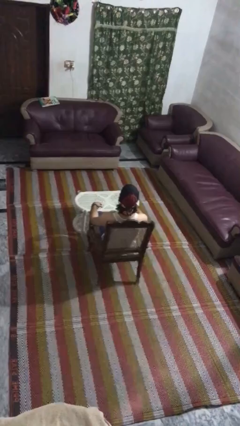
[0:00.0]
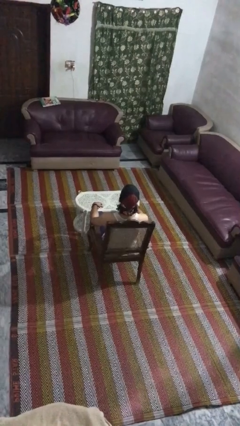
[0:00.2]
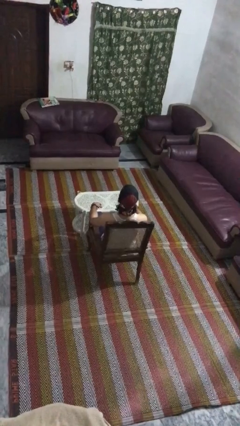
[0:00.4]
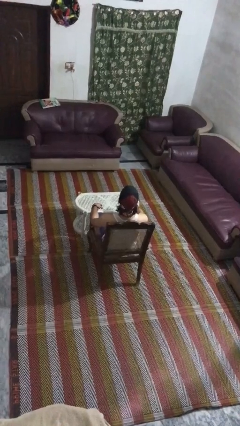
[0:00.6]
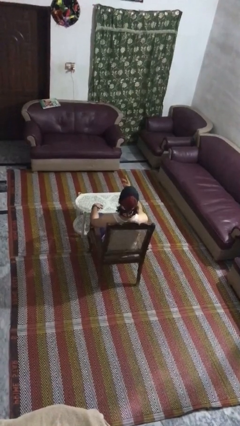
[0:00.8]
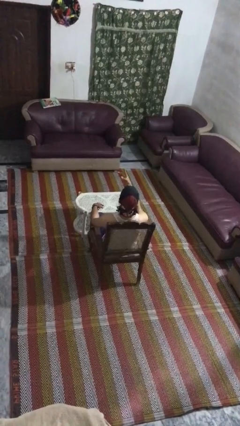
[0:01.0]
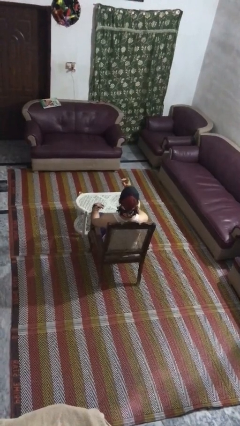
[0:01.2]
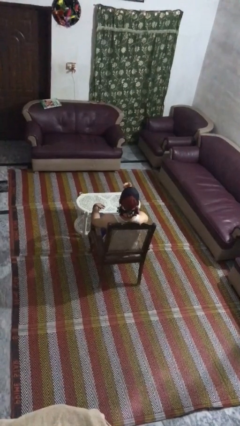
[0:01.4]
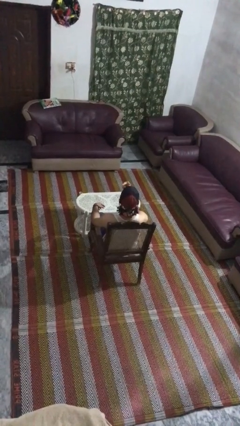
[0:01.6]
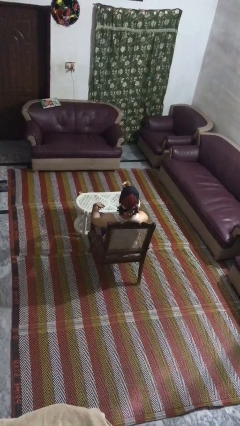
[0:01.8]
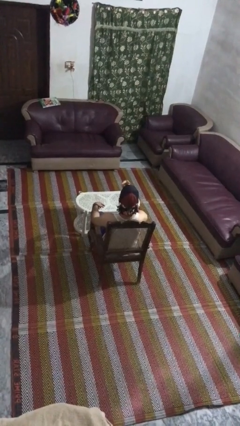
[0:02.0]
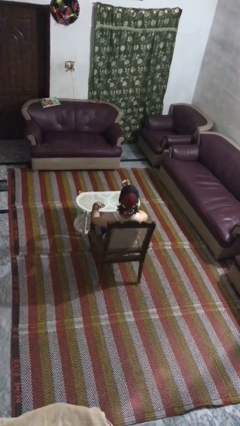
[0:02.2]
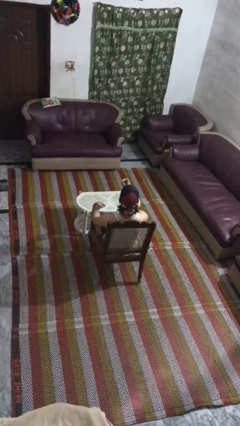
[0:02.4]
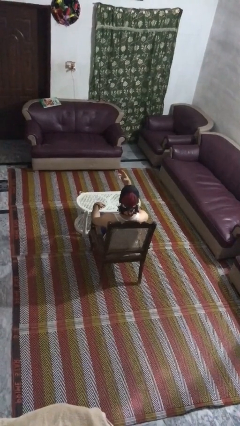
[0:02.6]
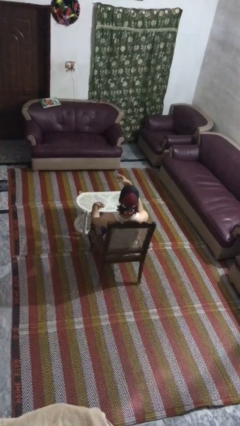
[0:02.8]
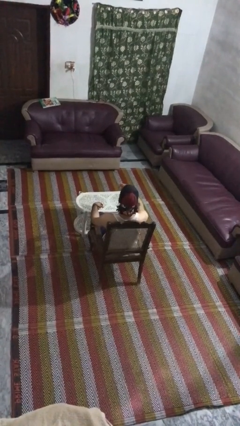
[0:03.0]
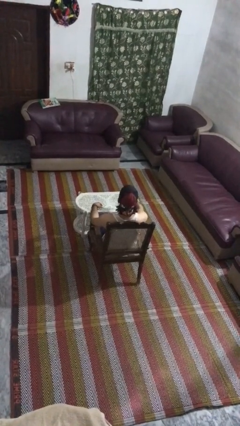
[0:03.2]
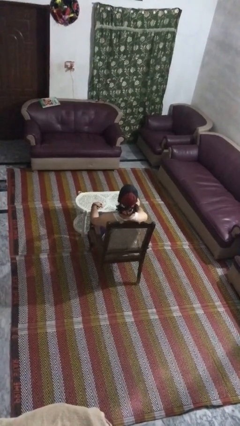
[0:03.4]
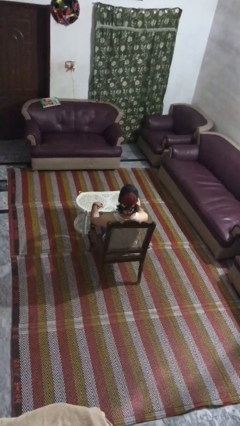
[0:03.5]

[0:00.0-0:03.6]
person gestures watch closely

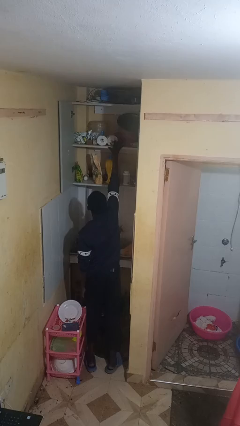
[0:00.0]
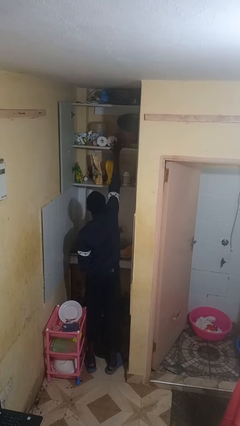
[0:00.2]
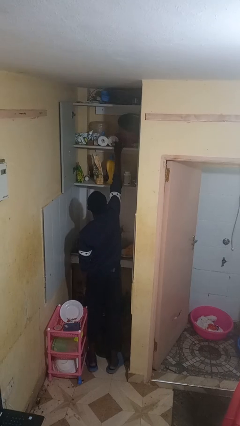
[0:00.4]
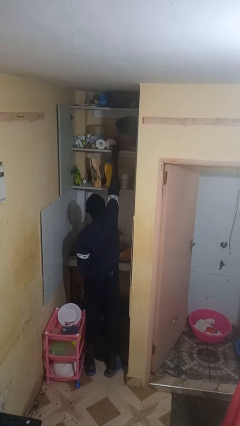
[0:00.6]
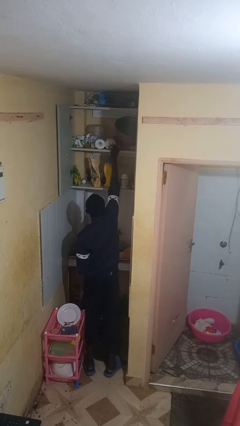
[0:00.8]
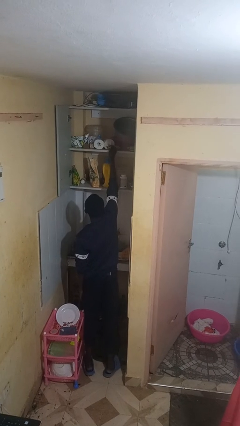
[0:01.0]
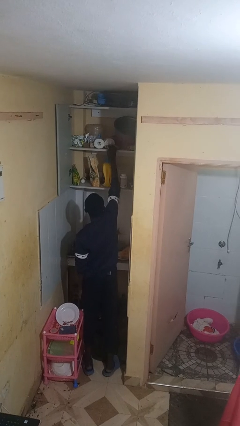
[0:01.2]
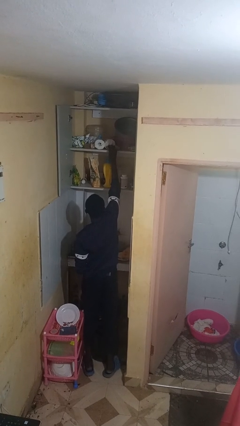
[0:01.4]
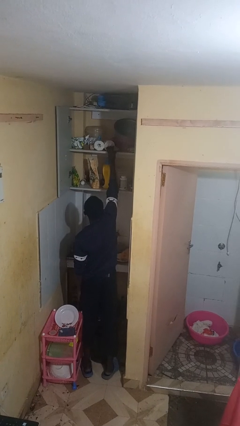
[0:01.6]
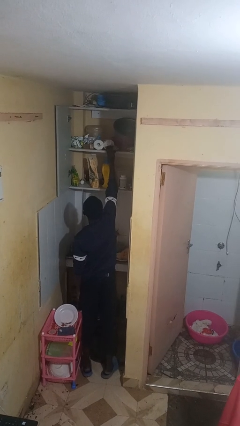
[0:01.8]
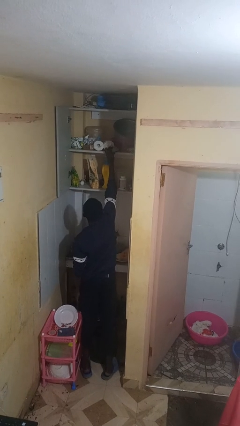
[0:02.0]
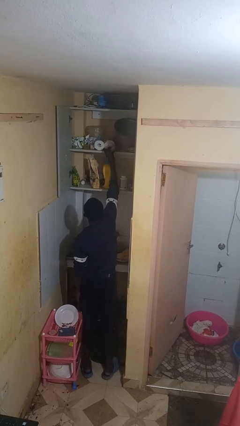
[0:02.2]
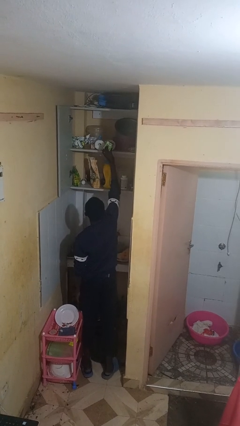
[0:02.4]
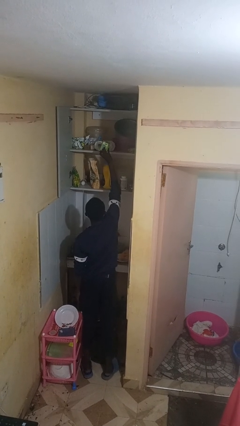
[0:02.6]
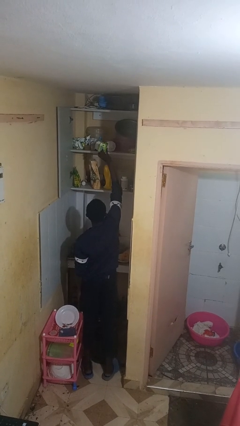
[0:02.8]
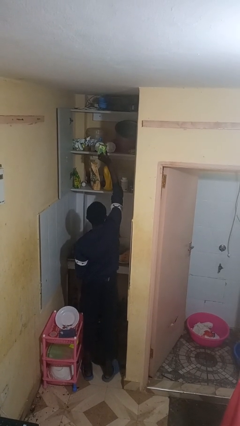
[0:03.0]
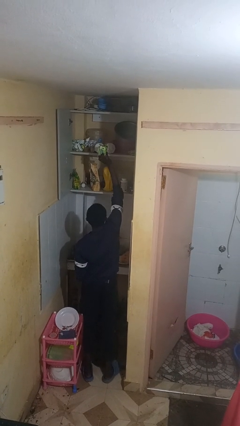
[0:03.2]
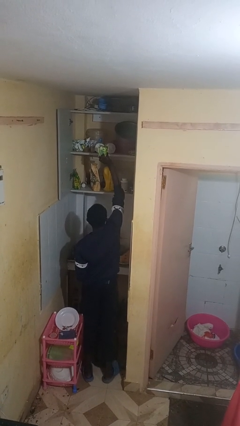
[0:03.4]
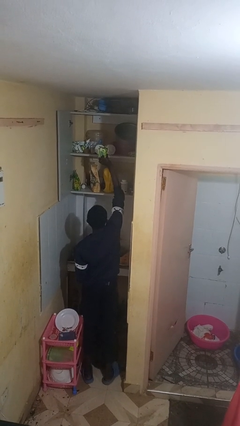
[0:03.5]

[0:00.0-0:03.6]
person takes object from cabinet

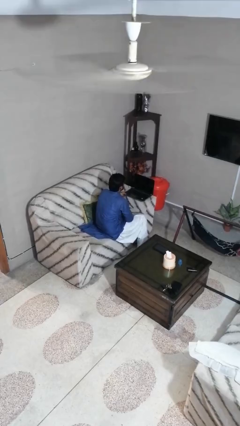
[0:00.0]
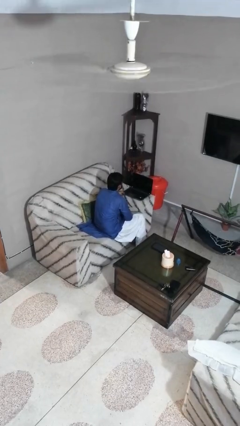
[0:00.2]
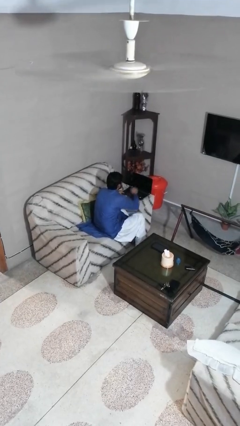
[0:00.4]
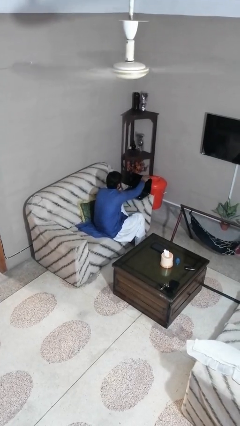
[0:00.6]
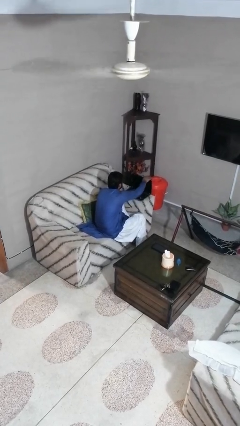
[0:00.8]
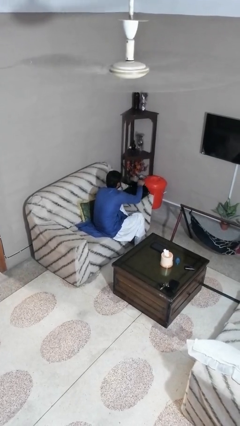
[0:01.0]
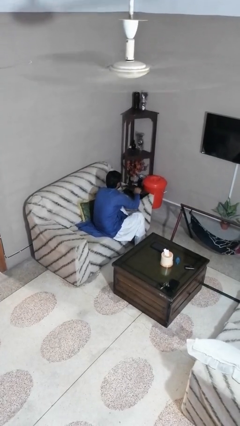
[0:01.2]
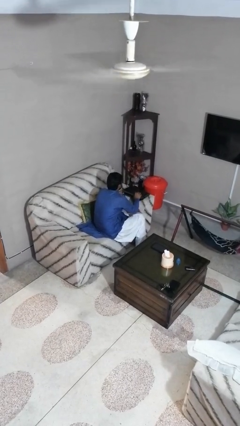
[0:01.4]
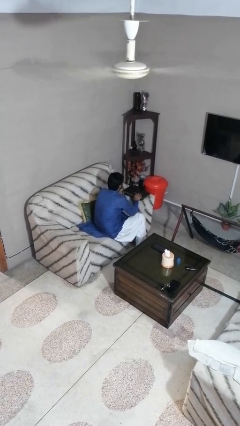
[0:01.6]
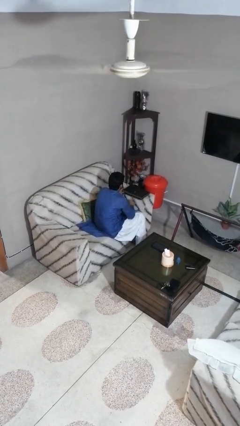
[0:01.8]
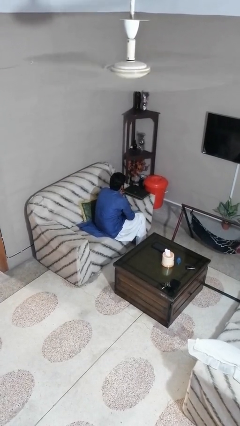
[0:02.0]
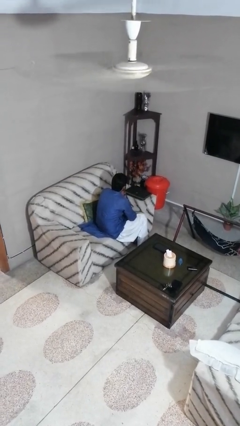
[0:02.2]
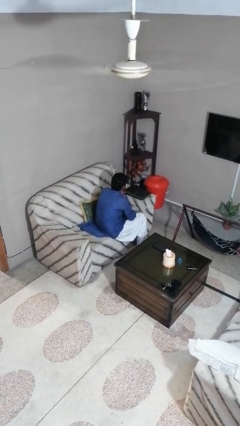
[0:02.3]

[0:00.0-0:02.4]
person closes laptop

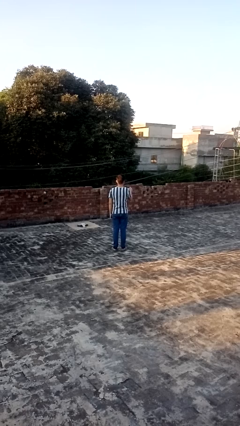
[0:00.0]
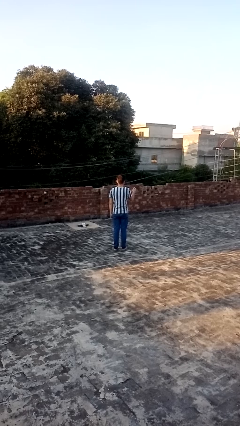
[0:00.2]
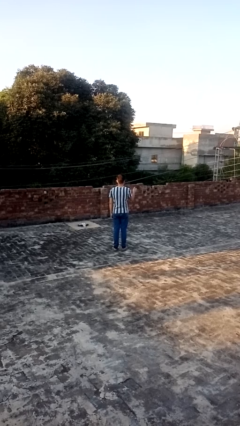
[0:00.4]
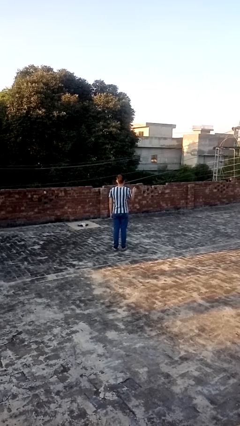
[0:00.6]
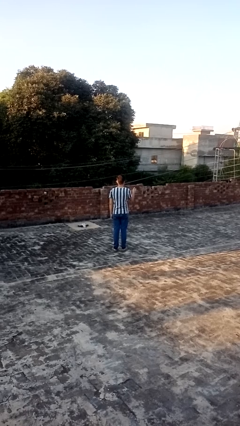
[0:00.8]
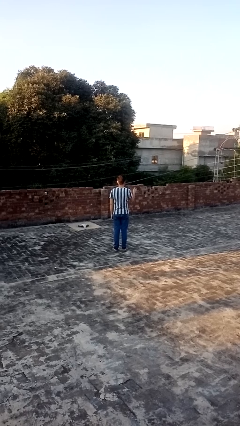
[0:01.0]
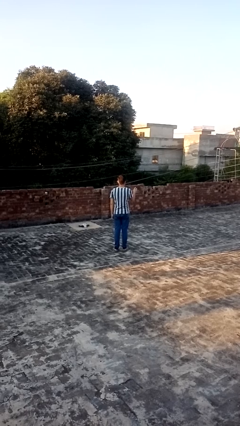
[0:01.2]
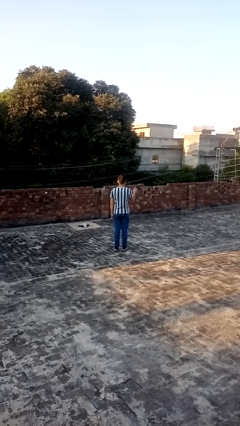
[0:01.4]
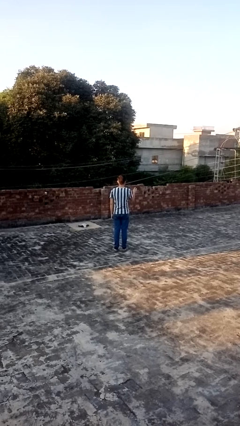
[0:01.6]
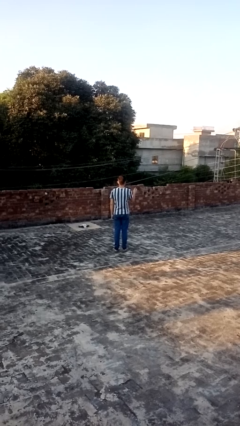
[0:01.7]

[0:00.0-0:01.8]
person gestures swipe right

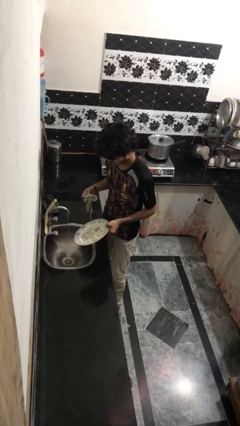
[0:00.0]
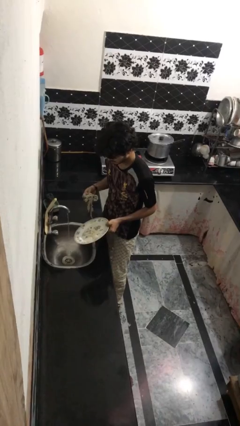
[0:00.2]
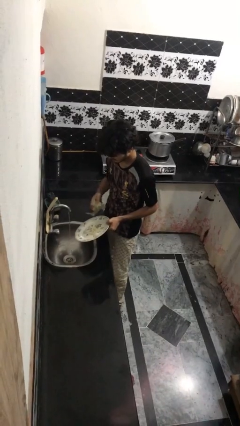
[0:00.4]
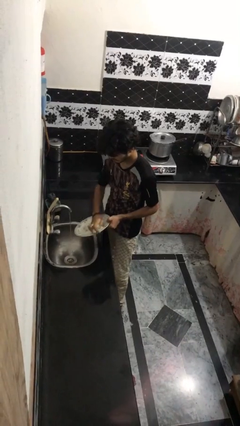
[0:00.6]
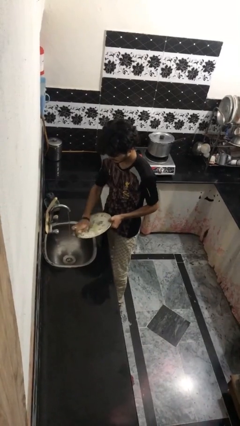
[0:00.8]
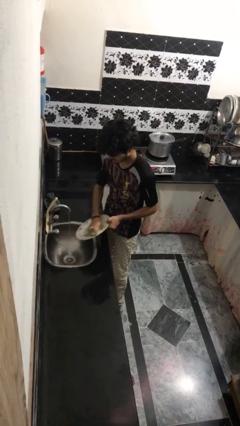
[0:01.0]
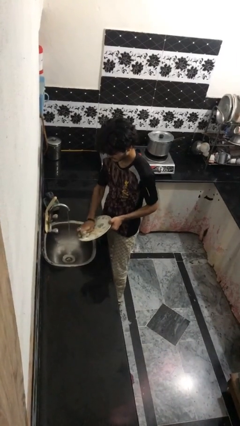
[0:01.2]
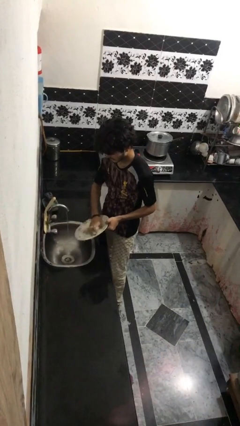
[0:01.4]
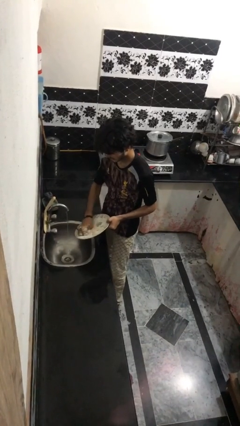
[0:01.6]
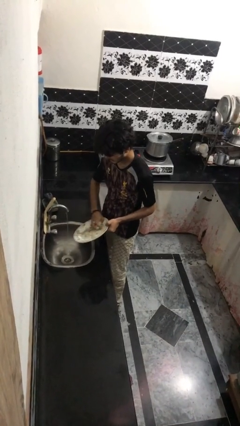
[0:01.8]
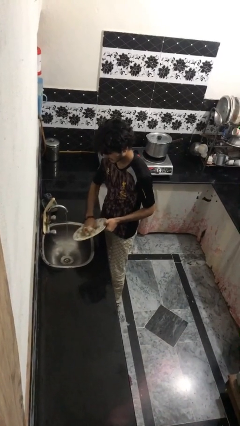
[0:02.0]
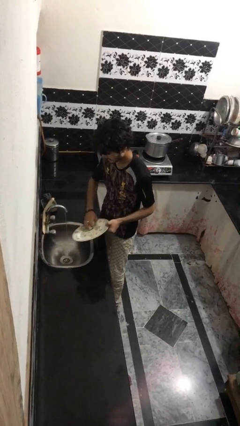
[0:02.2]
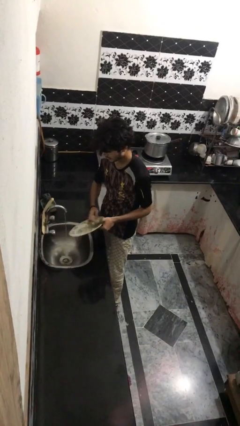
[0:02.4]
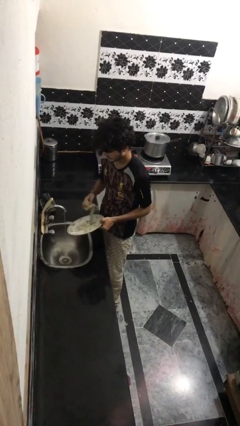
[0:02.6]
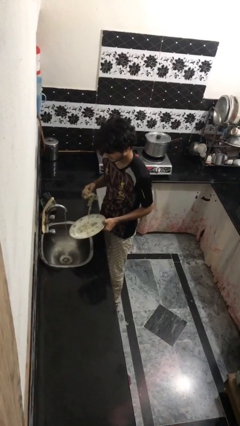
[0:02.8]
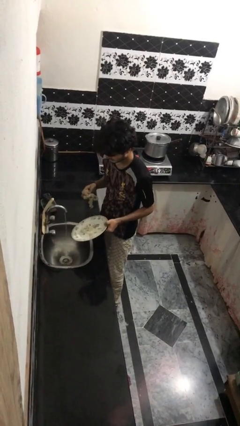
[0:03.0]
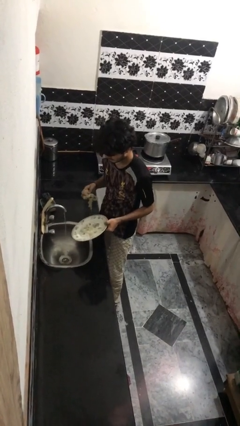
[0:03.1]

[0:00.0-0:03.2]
person washes dish

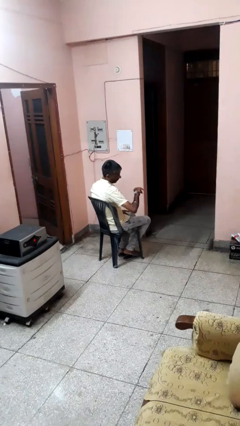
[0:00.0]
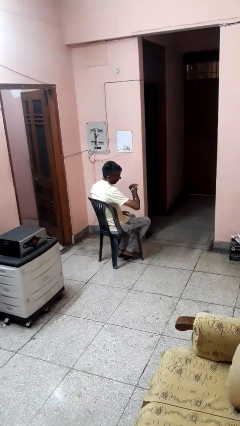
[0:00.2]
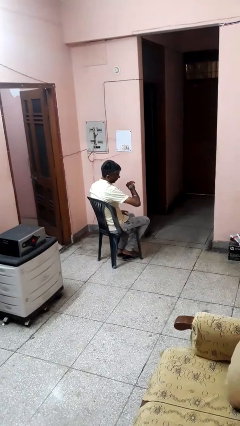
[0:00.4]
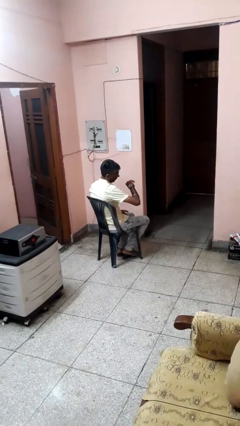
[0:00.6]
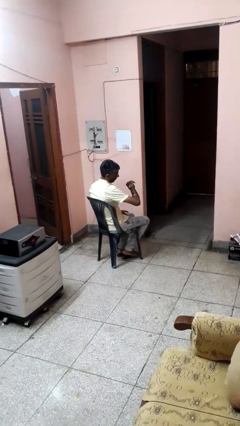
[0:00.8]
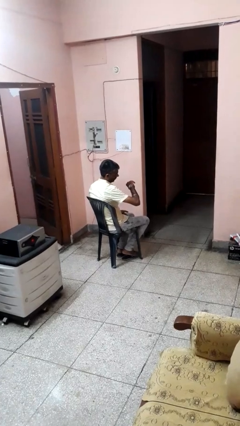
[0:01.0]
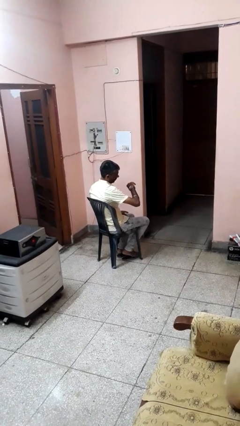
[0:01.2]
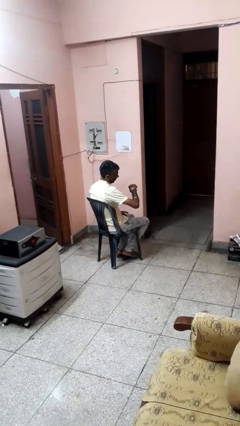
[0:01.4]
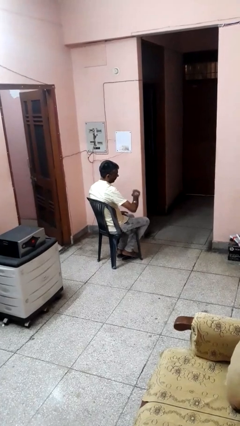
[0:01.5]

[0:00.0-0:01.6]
person looks at wristwatch

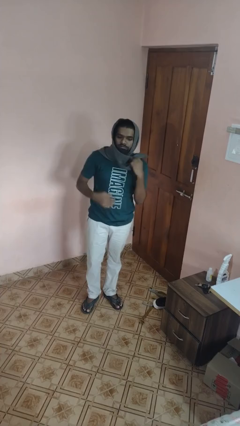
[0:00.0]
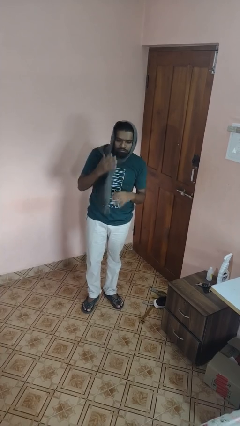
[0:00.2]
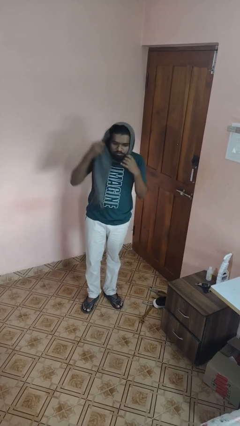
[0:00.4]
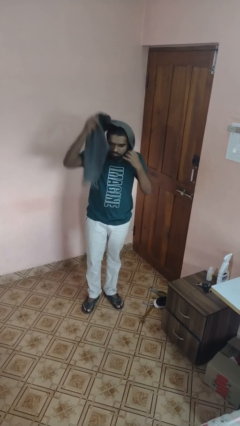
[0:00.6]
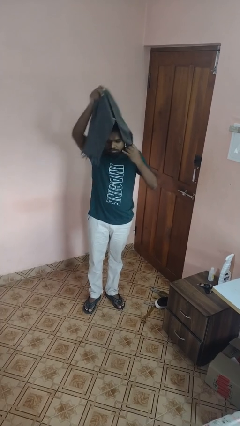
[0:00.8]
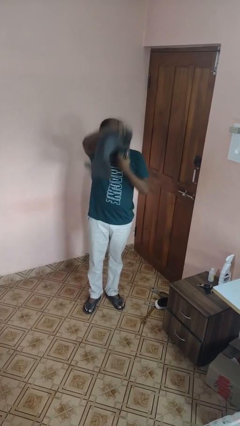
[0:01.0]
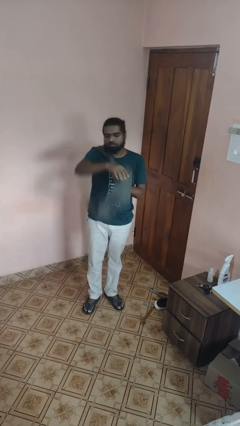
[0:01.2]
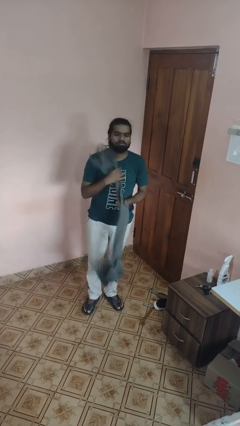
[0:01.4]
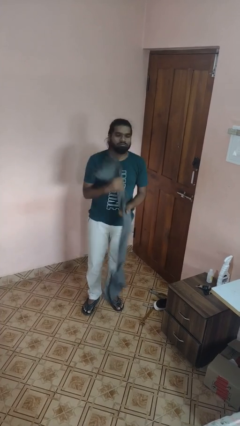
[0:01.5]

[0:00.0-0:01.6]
person takes off scarf
